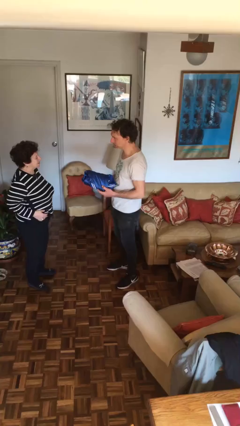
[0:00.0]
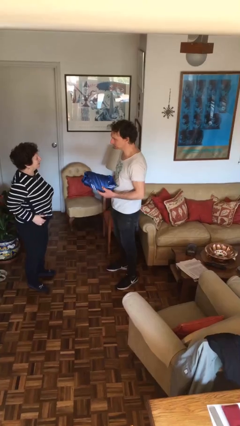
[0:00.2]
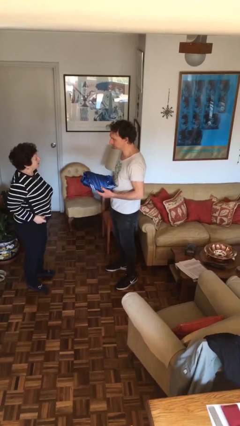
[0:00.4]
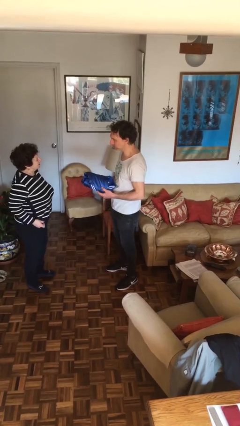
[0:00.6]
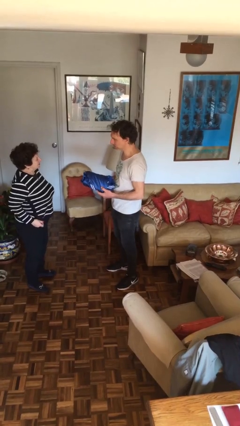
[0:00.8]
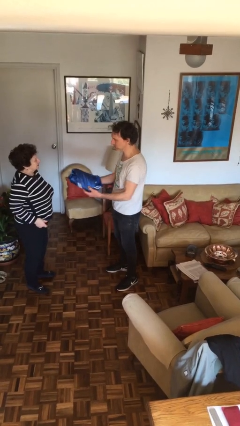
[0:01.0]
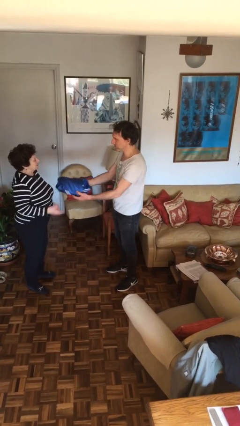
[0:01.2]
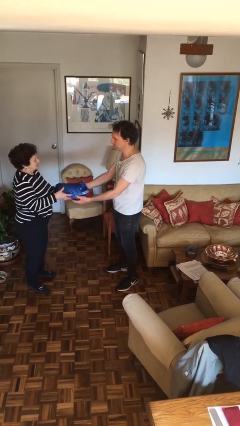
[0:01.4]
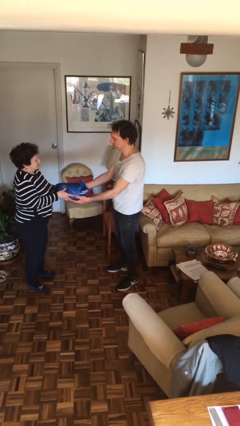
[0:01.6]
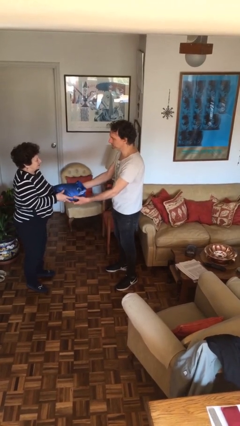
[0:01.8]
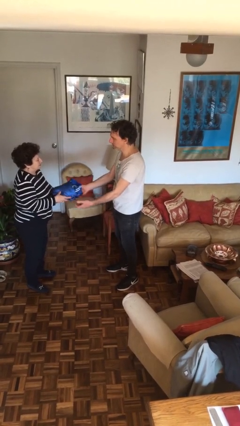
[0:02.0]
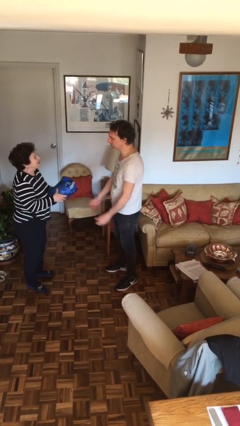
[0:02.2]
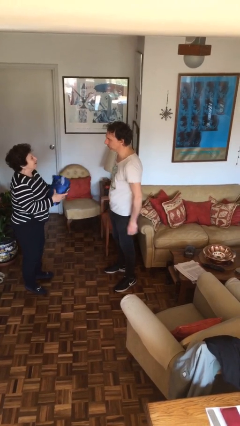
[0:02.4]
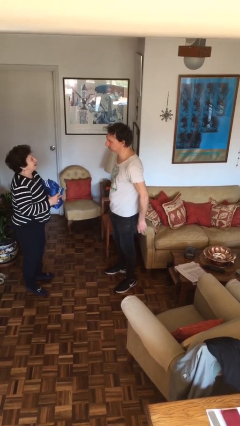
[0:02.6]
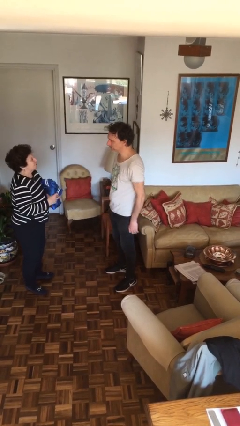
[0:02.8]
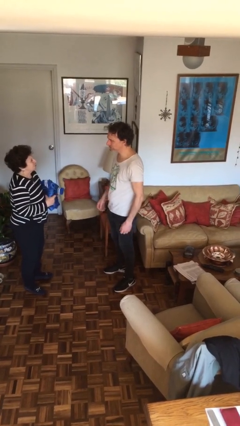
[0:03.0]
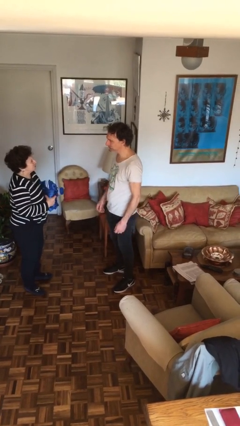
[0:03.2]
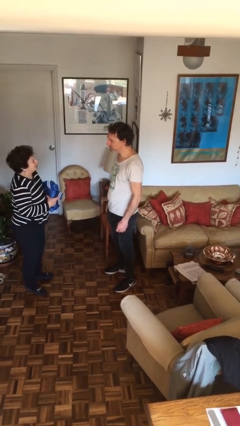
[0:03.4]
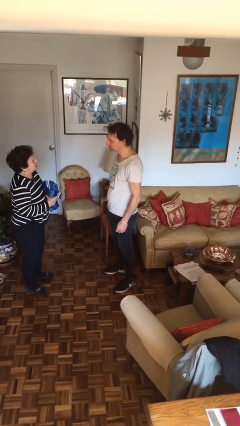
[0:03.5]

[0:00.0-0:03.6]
person transfers object to person

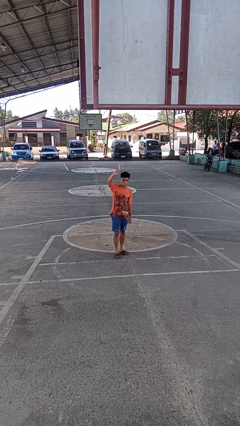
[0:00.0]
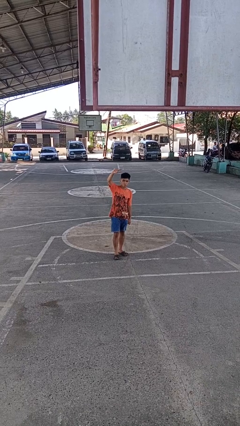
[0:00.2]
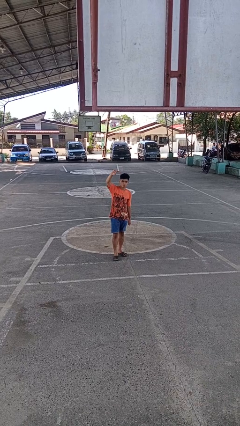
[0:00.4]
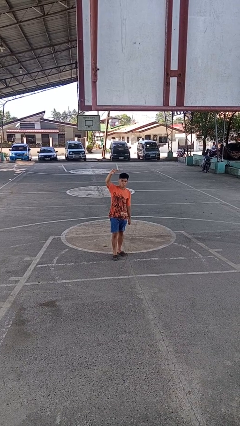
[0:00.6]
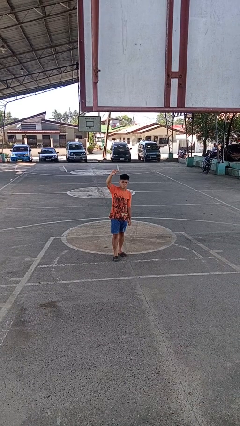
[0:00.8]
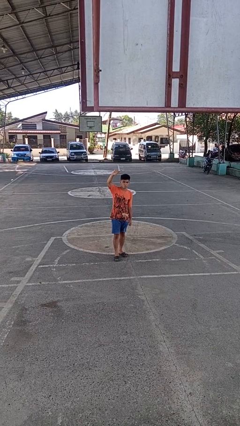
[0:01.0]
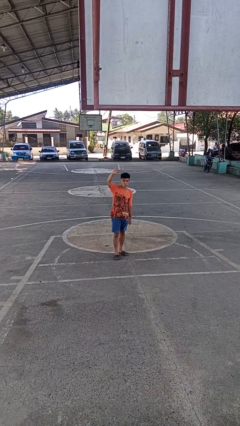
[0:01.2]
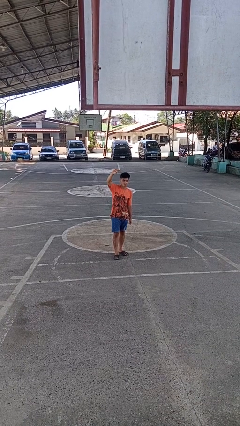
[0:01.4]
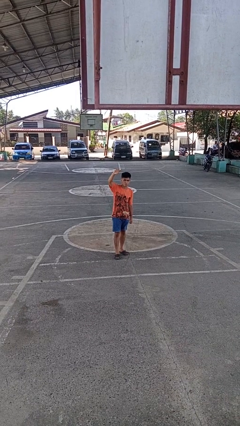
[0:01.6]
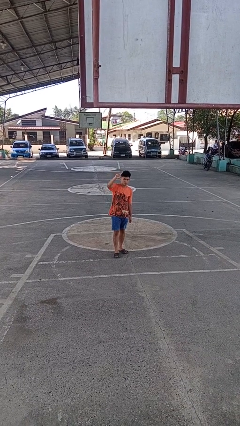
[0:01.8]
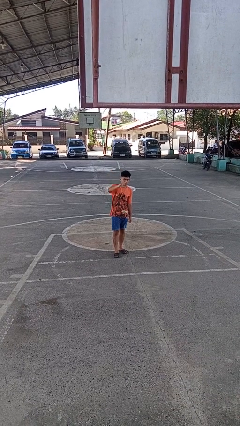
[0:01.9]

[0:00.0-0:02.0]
person gestures swipe up

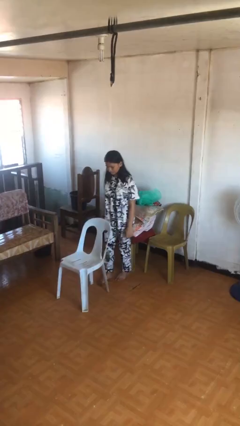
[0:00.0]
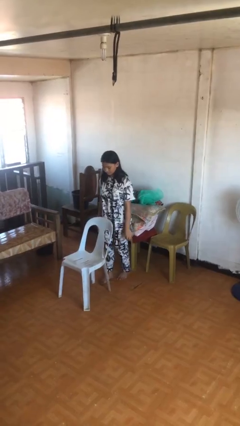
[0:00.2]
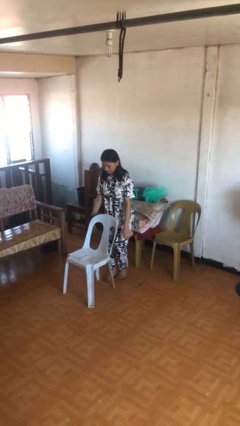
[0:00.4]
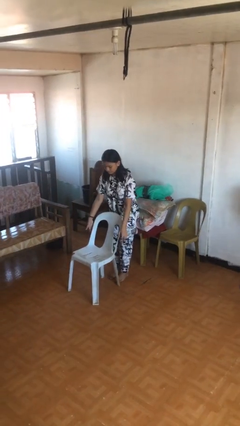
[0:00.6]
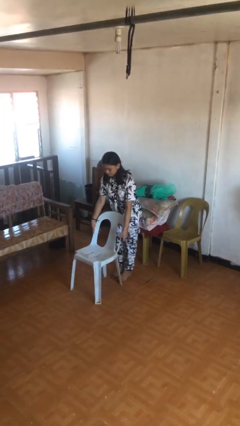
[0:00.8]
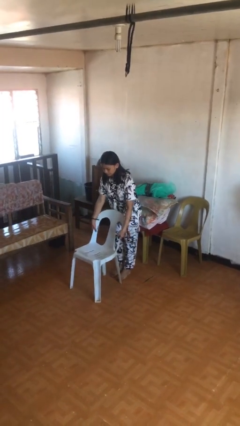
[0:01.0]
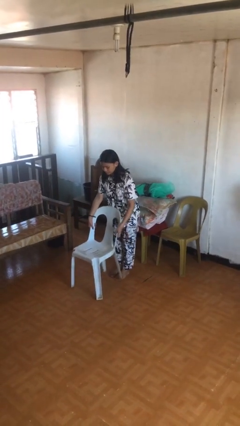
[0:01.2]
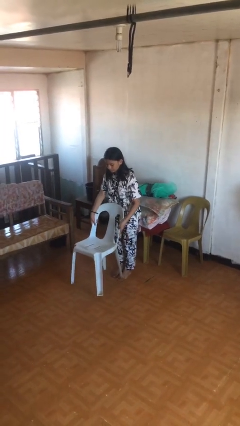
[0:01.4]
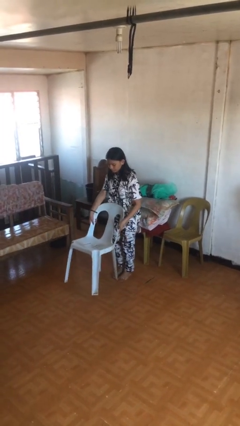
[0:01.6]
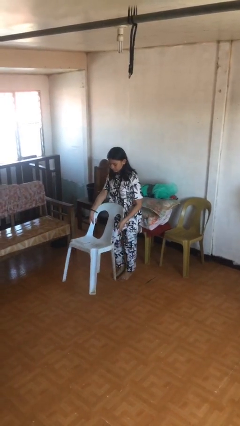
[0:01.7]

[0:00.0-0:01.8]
person picks up object from floor

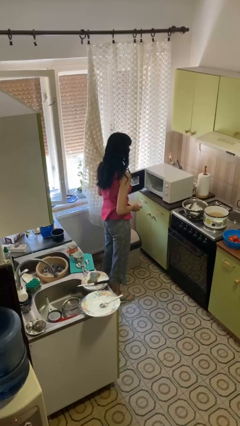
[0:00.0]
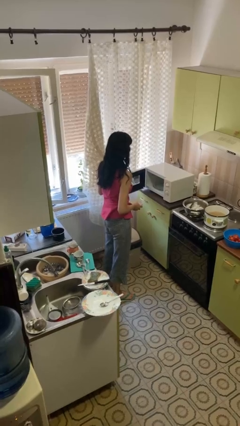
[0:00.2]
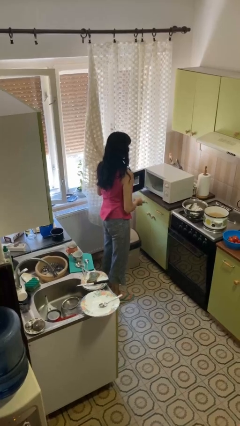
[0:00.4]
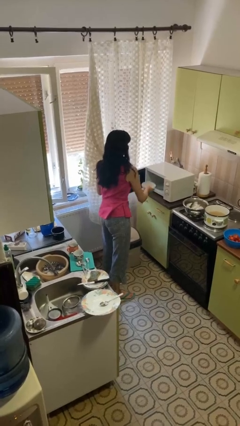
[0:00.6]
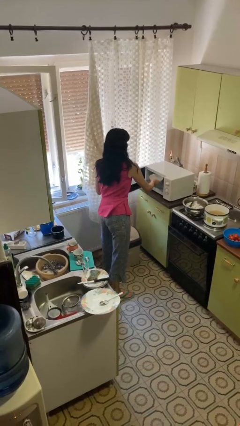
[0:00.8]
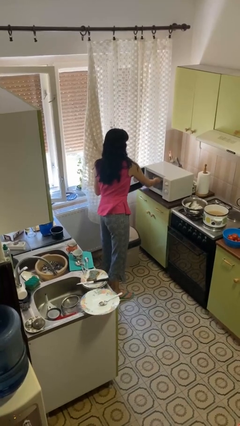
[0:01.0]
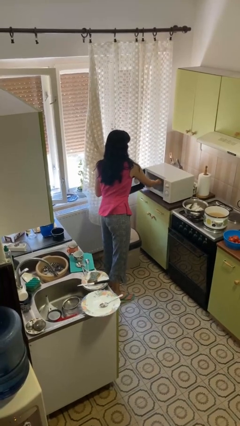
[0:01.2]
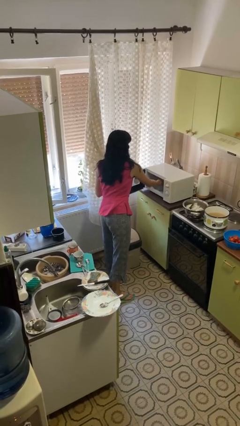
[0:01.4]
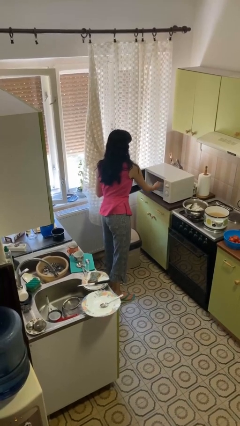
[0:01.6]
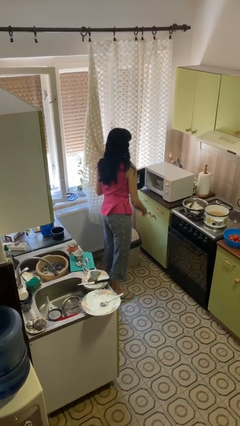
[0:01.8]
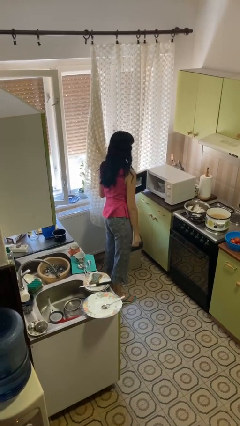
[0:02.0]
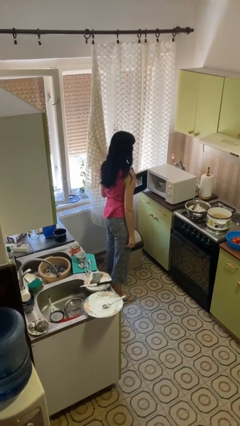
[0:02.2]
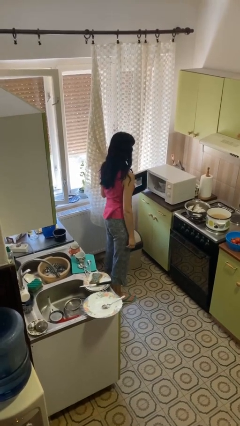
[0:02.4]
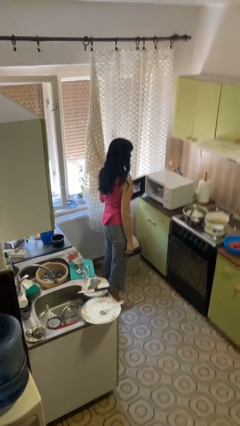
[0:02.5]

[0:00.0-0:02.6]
person puts object into microwave

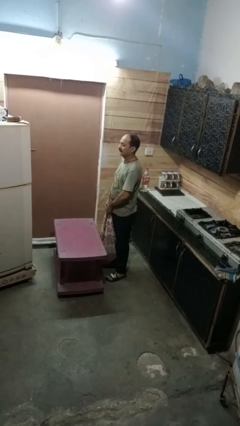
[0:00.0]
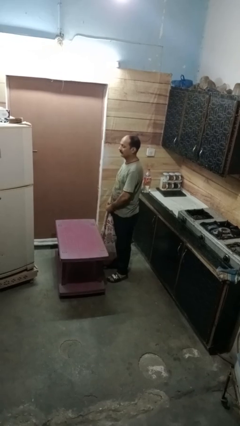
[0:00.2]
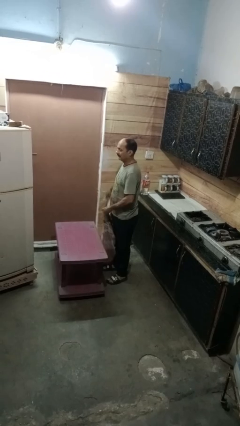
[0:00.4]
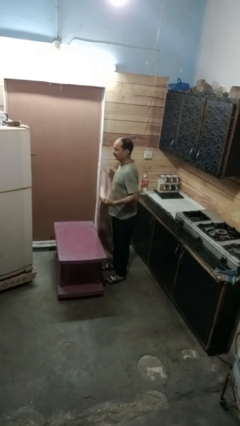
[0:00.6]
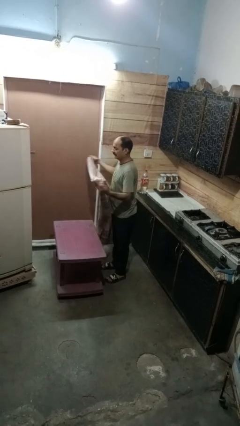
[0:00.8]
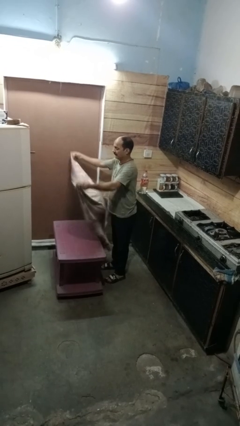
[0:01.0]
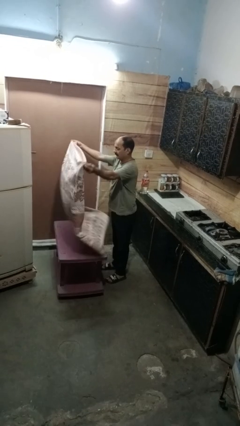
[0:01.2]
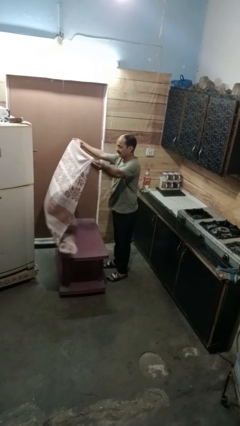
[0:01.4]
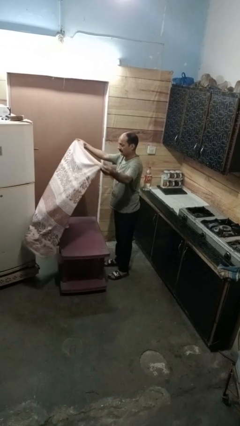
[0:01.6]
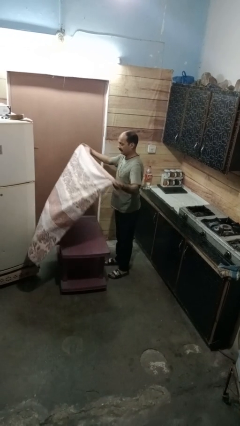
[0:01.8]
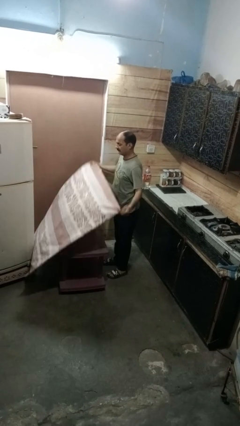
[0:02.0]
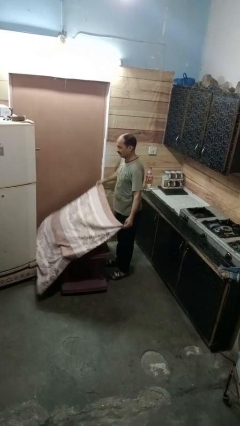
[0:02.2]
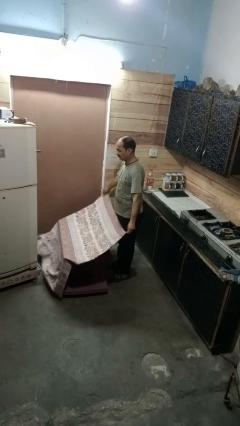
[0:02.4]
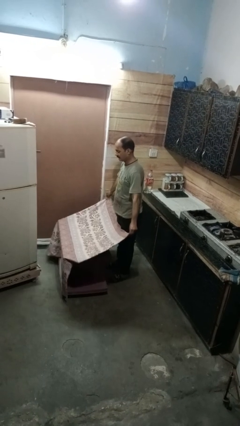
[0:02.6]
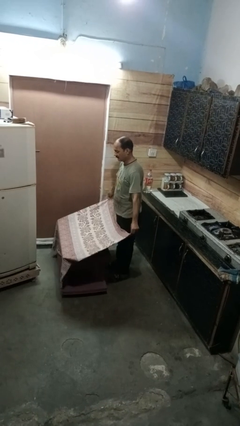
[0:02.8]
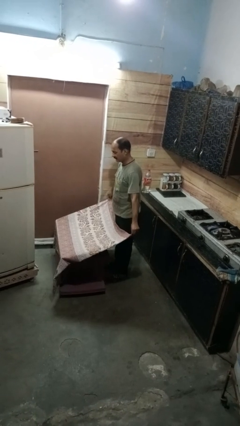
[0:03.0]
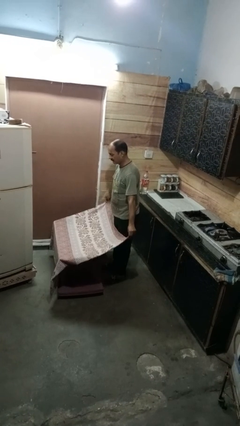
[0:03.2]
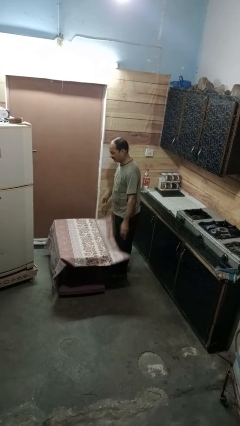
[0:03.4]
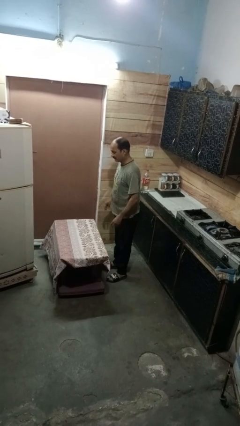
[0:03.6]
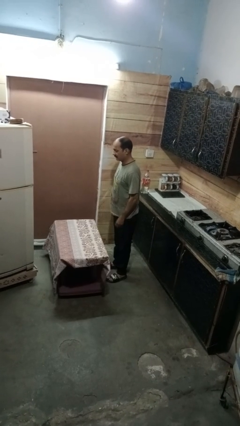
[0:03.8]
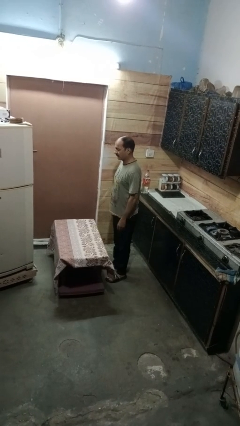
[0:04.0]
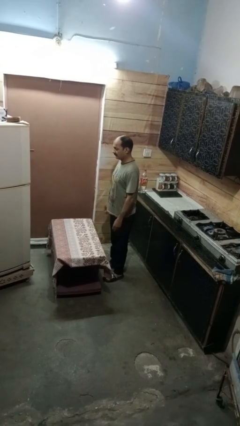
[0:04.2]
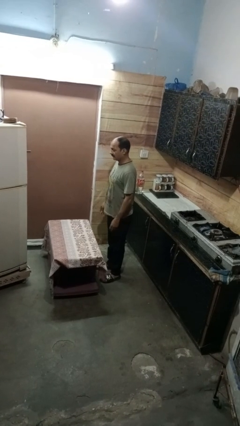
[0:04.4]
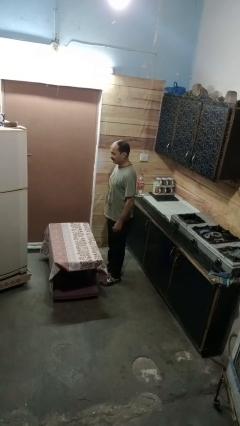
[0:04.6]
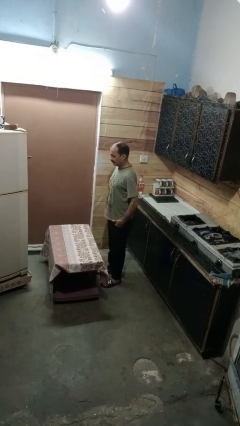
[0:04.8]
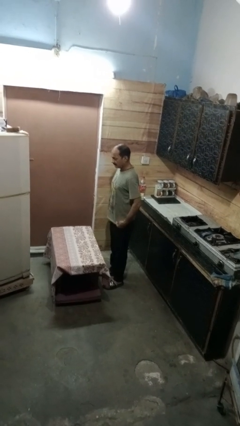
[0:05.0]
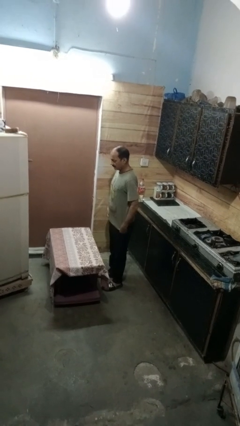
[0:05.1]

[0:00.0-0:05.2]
person spreads tablecloth

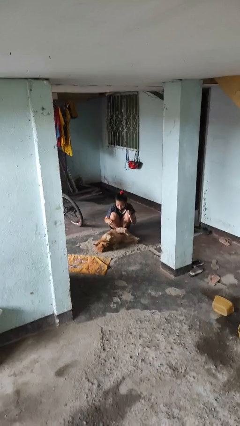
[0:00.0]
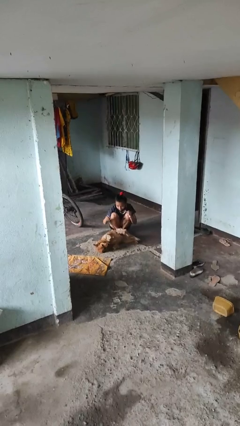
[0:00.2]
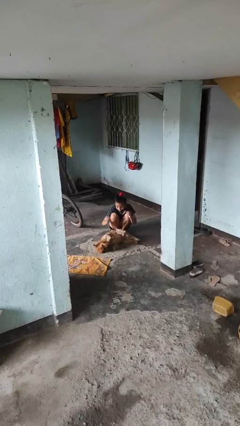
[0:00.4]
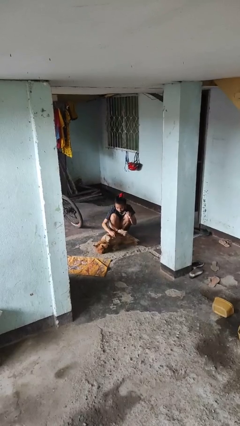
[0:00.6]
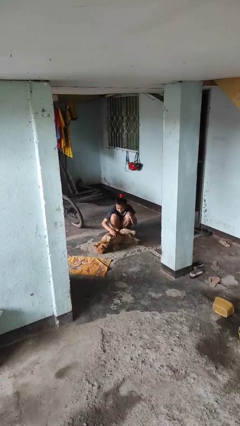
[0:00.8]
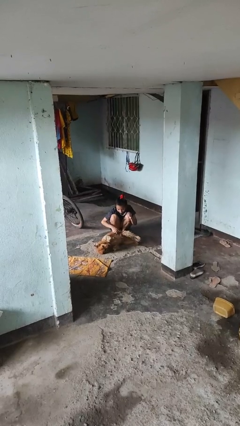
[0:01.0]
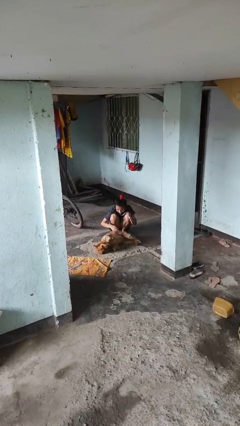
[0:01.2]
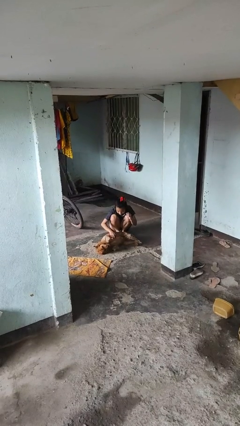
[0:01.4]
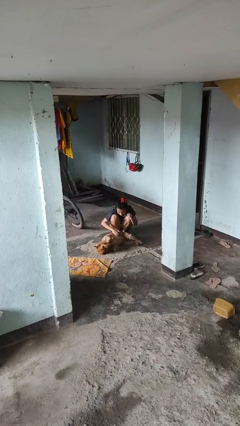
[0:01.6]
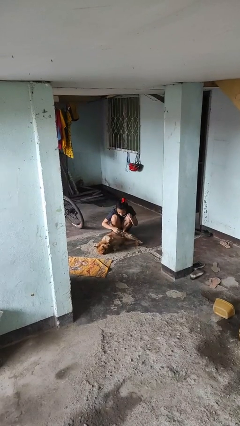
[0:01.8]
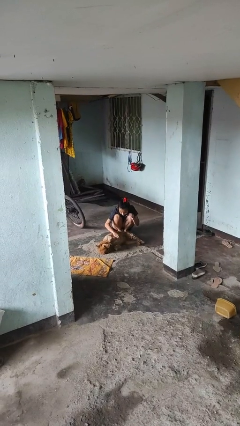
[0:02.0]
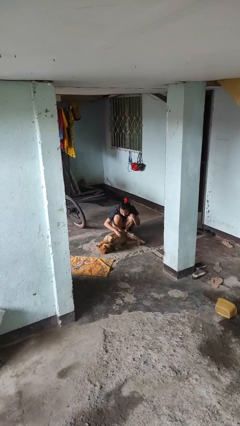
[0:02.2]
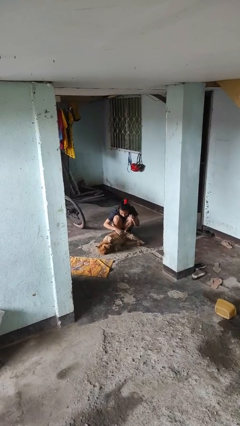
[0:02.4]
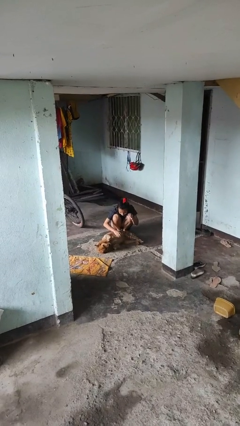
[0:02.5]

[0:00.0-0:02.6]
person pets dog
